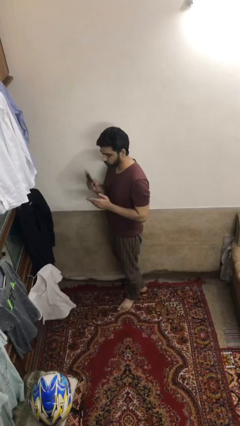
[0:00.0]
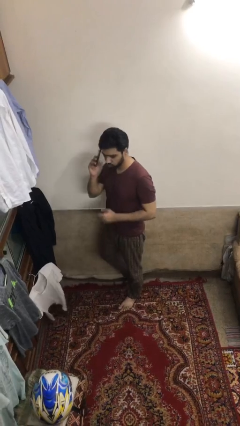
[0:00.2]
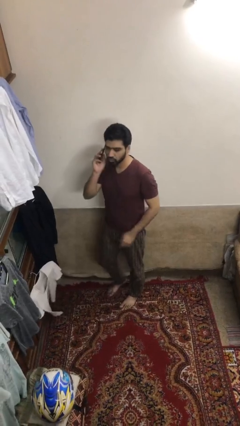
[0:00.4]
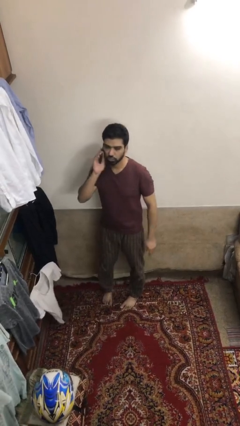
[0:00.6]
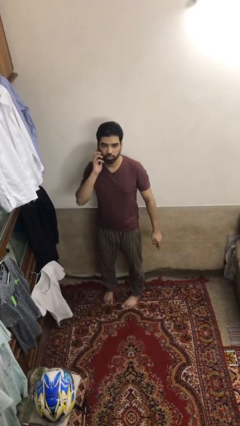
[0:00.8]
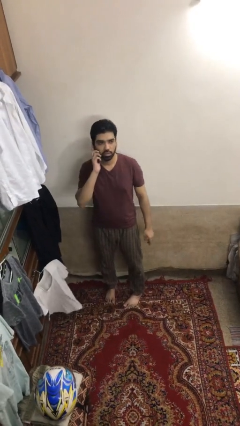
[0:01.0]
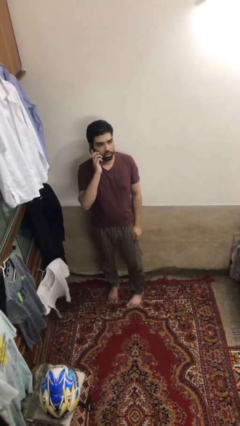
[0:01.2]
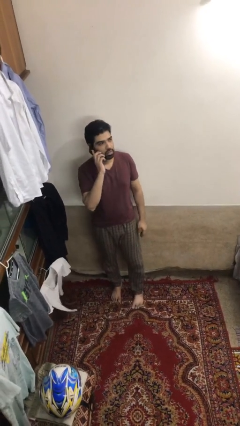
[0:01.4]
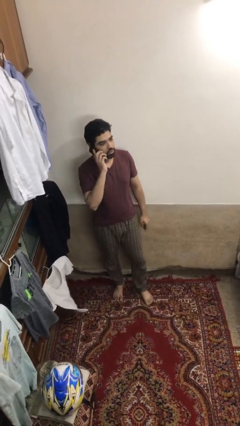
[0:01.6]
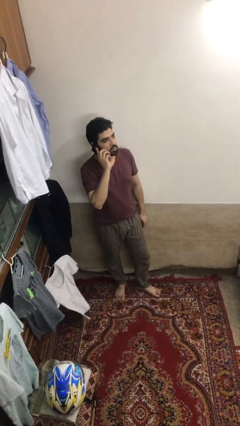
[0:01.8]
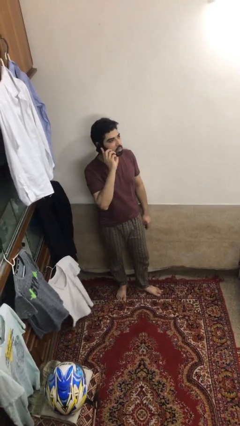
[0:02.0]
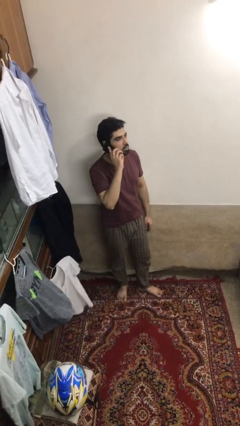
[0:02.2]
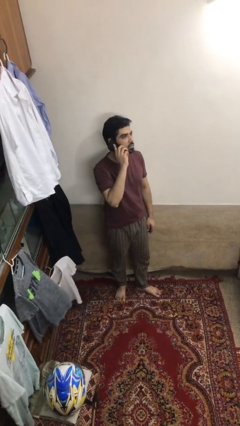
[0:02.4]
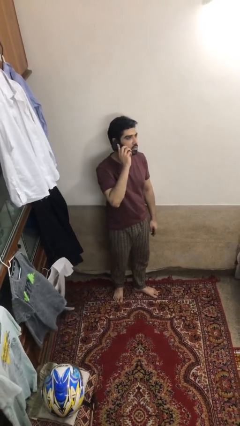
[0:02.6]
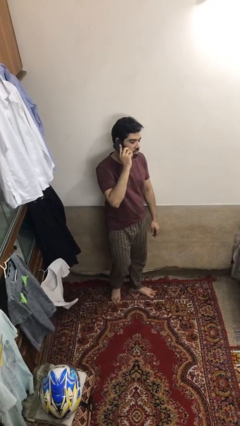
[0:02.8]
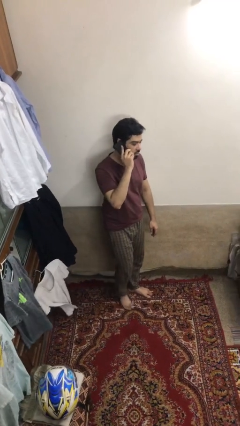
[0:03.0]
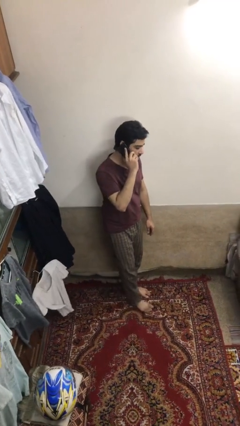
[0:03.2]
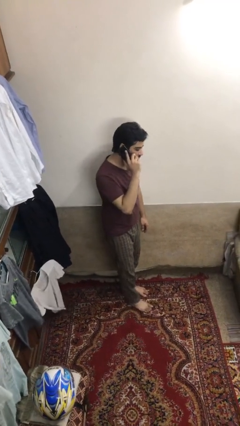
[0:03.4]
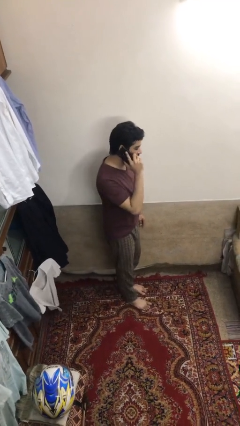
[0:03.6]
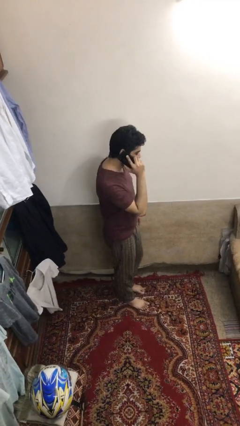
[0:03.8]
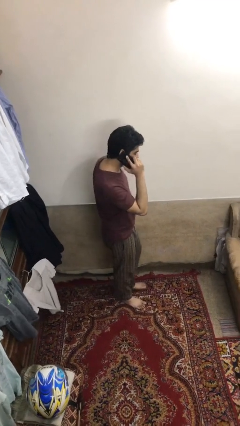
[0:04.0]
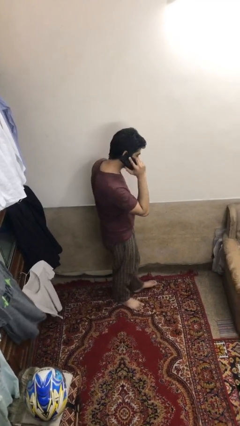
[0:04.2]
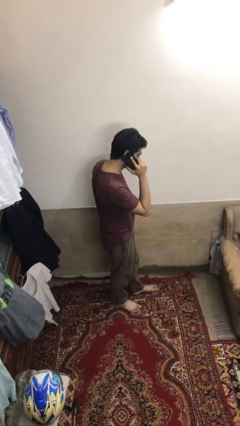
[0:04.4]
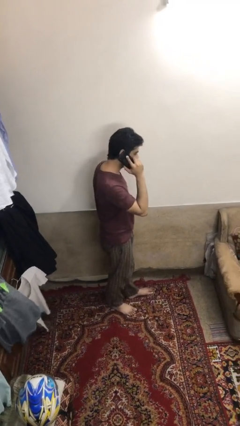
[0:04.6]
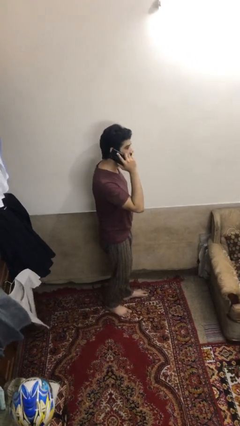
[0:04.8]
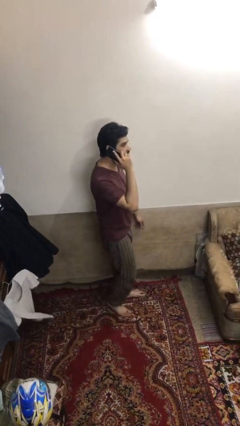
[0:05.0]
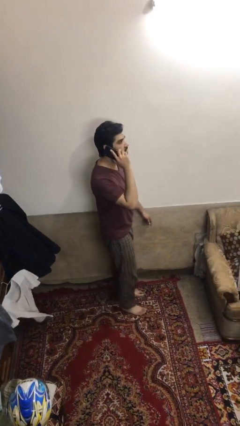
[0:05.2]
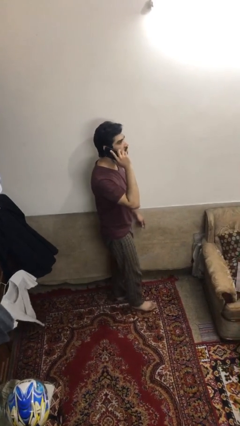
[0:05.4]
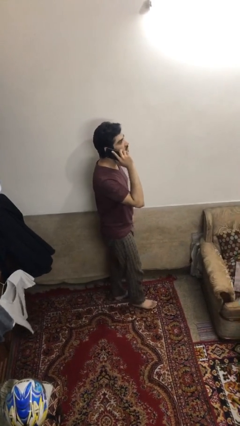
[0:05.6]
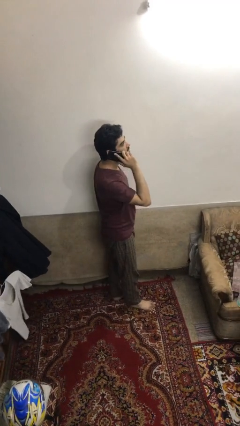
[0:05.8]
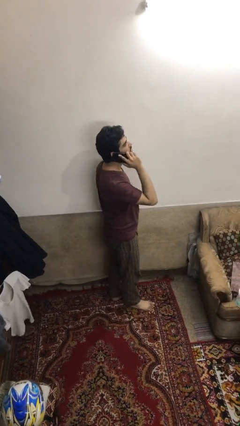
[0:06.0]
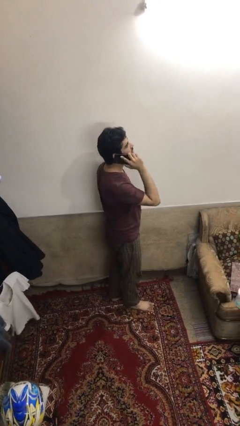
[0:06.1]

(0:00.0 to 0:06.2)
person talks on phone

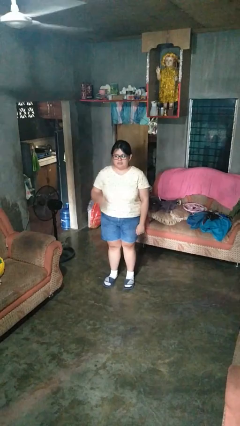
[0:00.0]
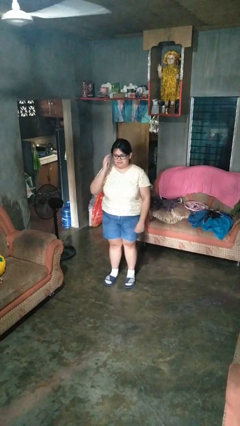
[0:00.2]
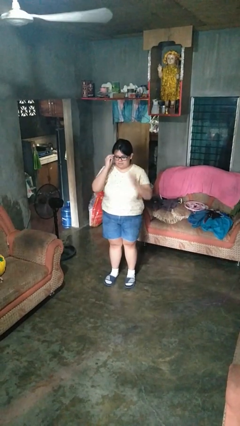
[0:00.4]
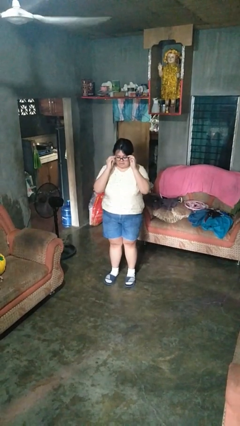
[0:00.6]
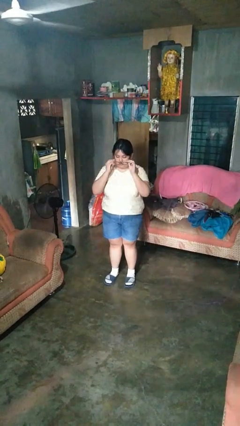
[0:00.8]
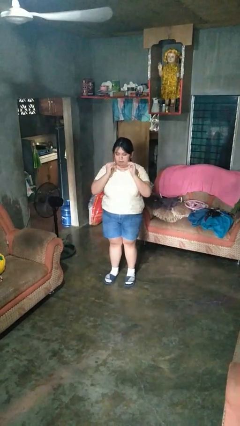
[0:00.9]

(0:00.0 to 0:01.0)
person takes off glasses

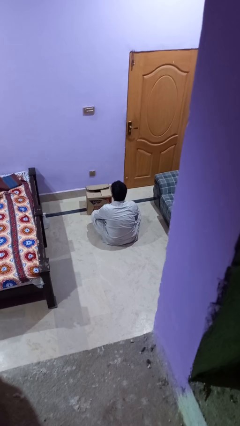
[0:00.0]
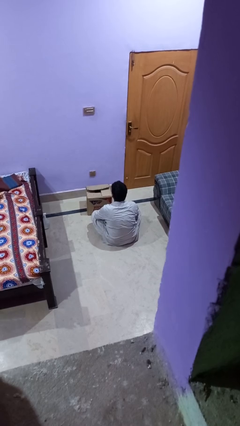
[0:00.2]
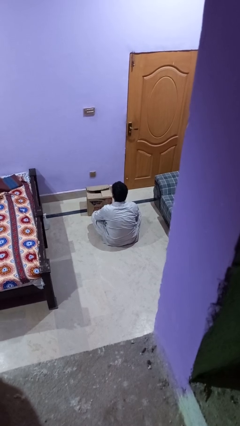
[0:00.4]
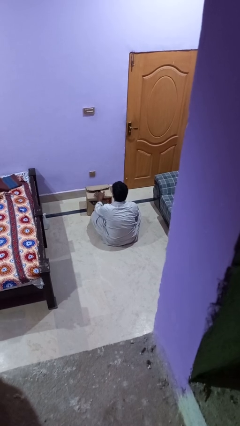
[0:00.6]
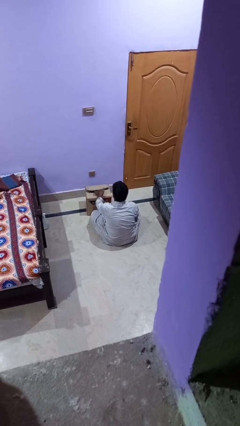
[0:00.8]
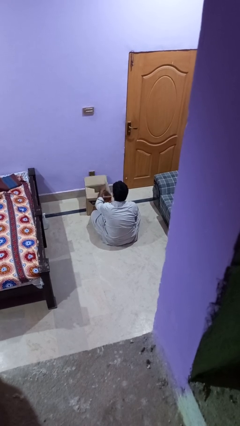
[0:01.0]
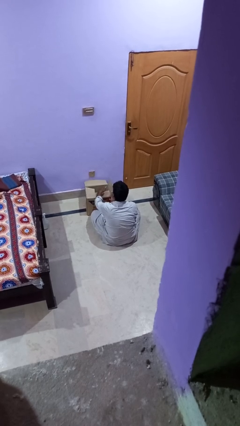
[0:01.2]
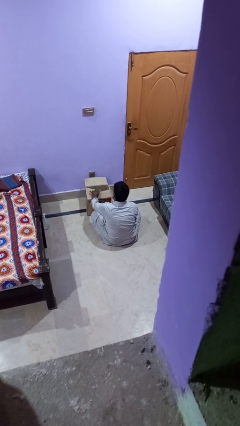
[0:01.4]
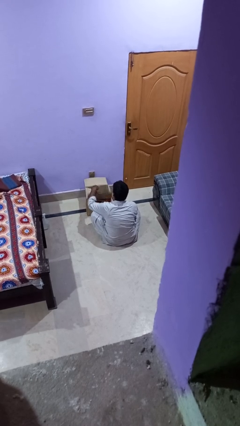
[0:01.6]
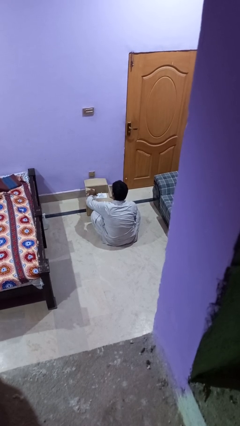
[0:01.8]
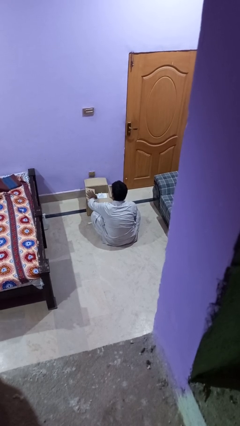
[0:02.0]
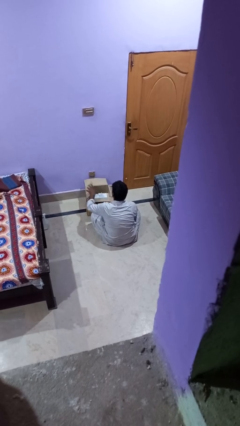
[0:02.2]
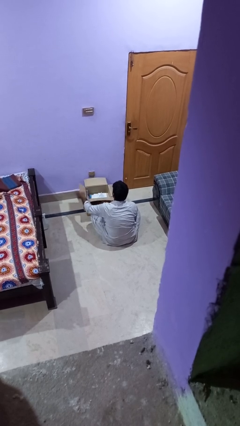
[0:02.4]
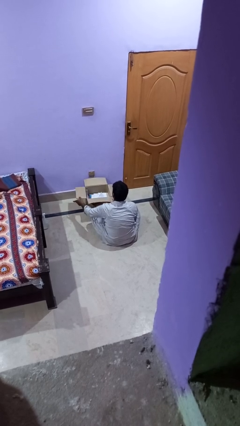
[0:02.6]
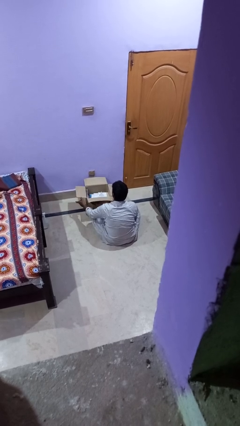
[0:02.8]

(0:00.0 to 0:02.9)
person opens box

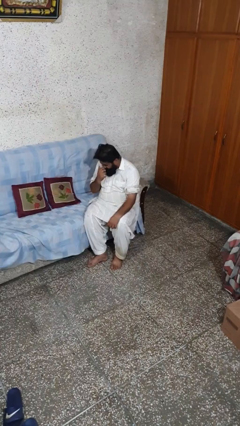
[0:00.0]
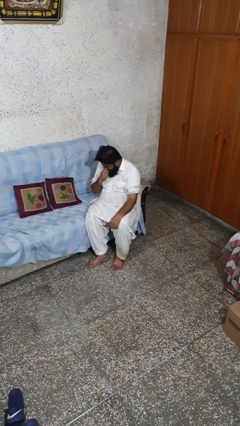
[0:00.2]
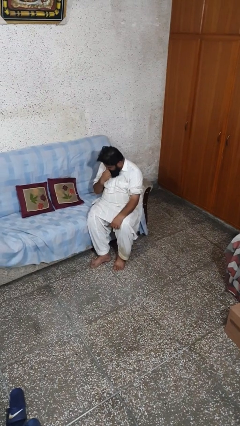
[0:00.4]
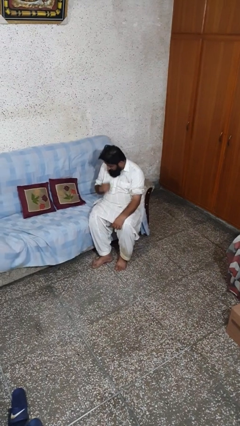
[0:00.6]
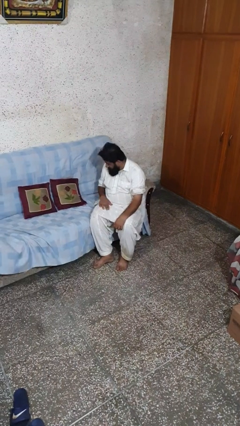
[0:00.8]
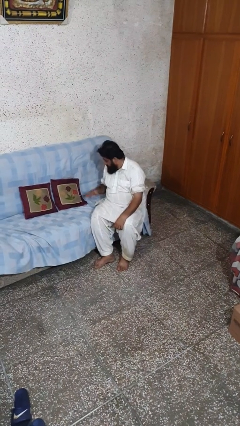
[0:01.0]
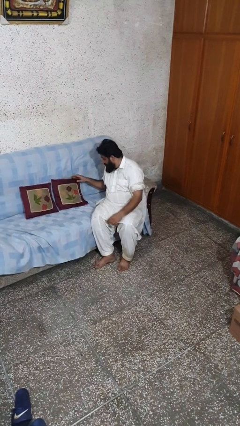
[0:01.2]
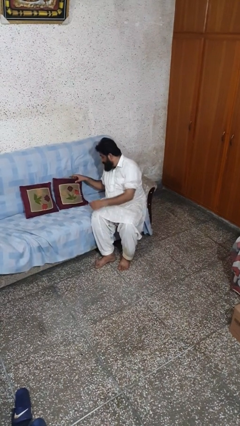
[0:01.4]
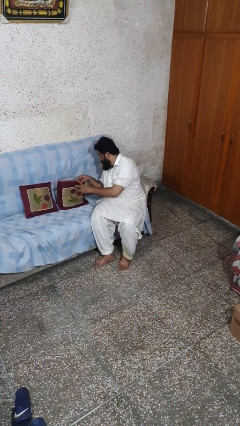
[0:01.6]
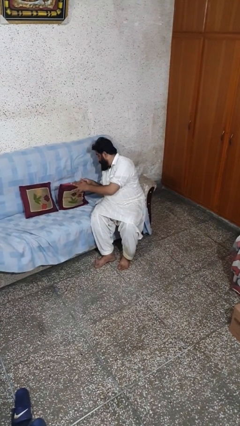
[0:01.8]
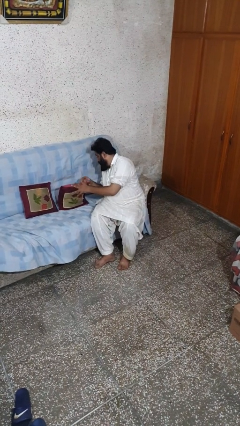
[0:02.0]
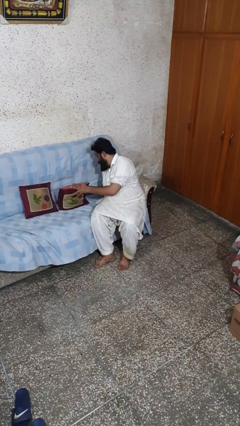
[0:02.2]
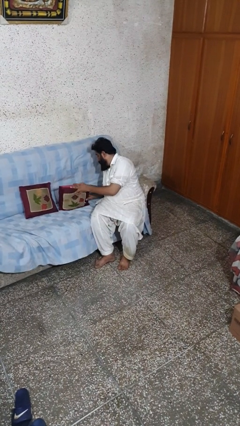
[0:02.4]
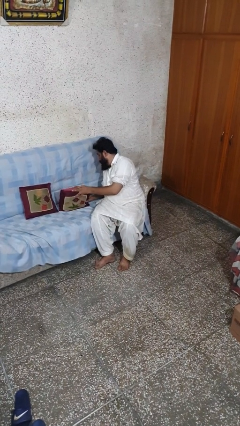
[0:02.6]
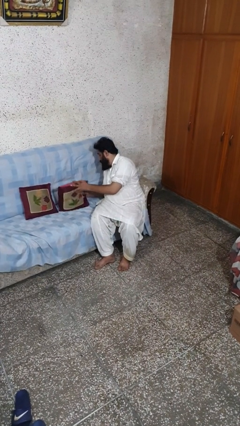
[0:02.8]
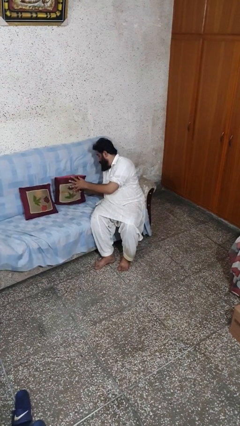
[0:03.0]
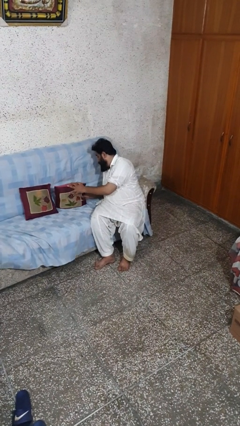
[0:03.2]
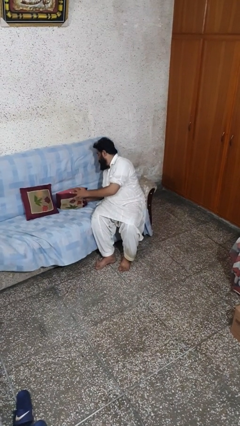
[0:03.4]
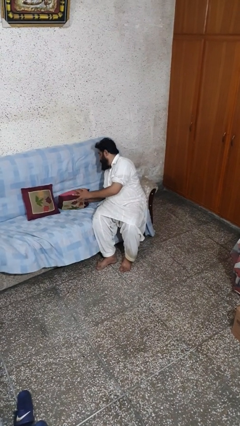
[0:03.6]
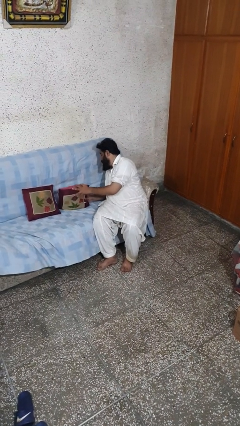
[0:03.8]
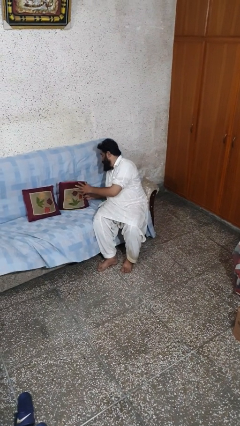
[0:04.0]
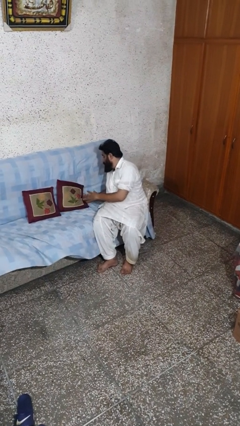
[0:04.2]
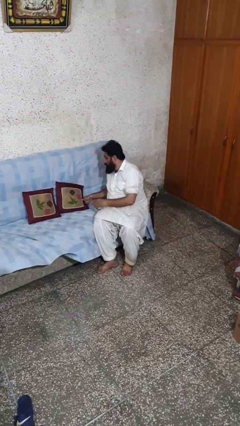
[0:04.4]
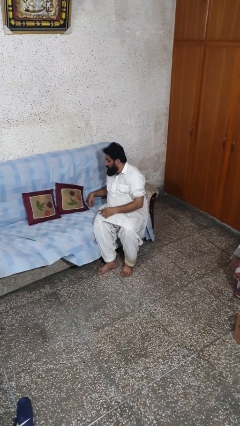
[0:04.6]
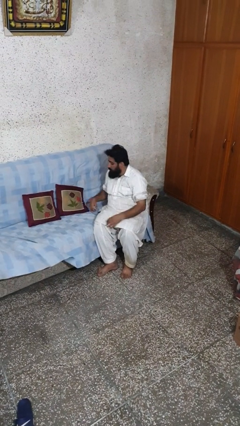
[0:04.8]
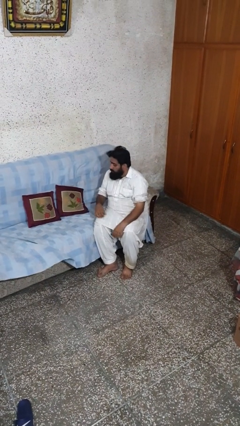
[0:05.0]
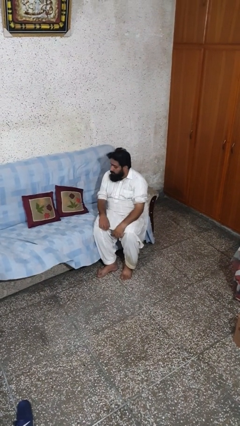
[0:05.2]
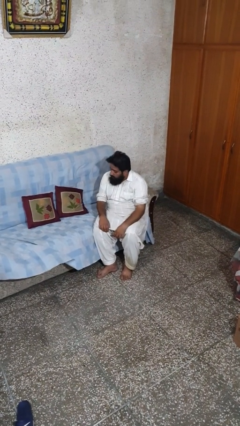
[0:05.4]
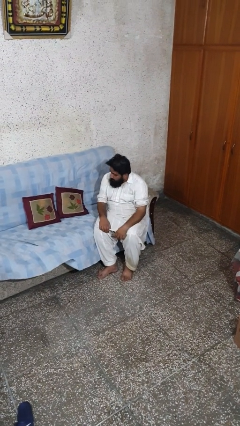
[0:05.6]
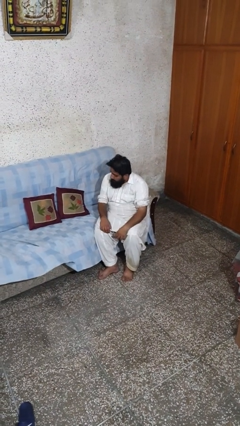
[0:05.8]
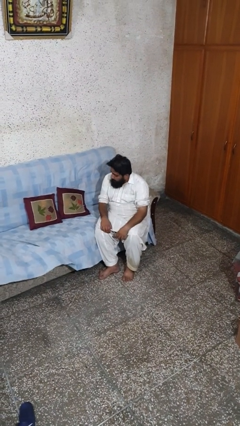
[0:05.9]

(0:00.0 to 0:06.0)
person searches in couch

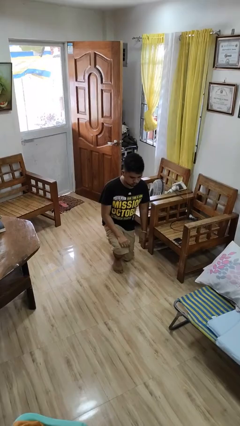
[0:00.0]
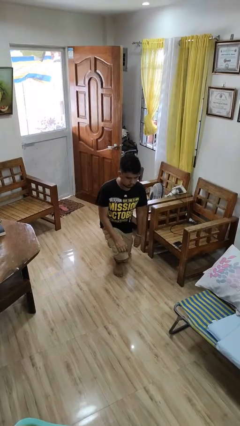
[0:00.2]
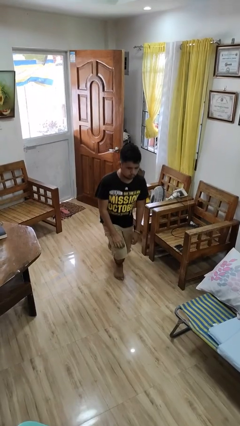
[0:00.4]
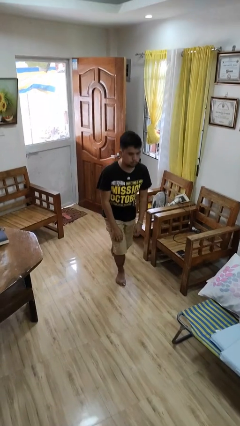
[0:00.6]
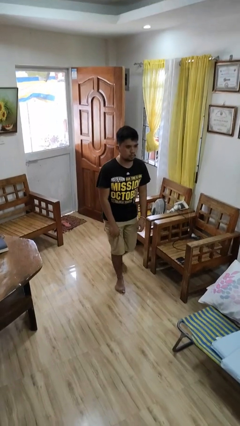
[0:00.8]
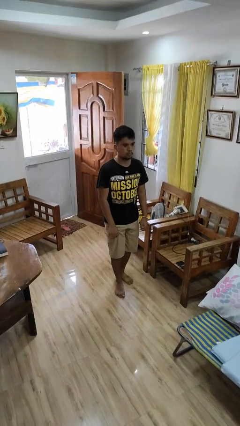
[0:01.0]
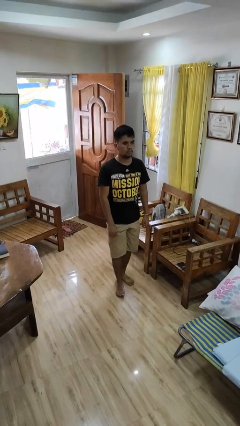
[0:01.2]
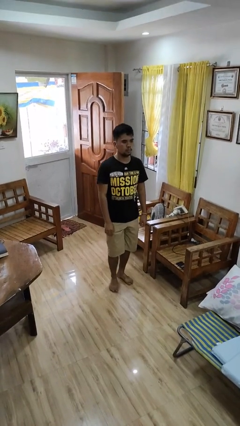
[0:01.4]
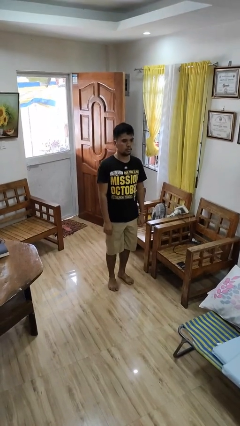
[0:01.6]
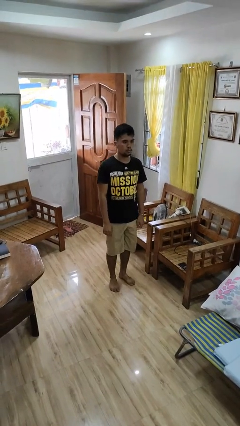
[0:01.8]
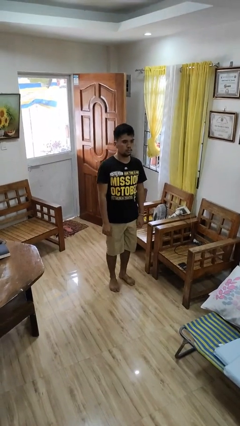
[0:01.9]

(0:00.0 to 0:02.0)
person stands up from floor
